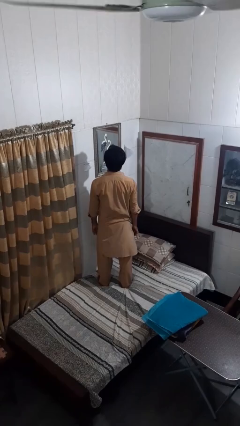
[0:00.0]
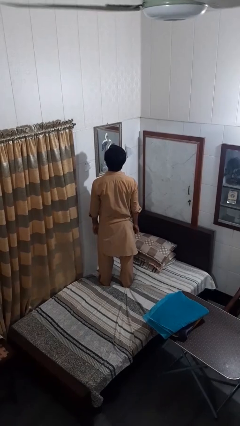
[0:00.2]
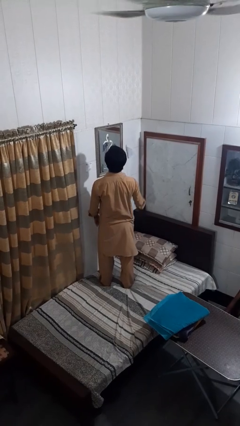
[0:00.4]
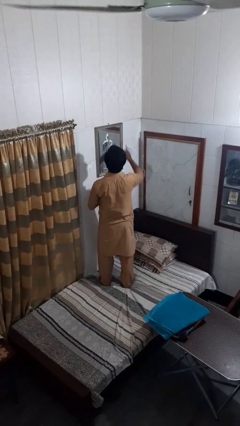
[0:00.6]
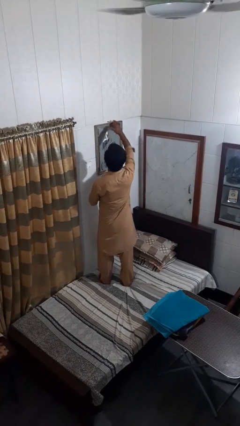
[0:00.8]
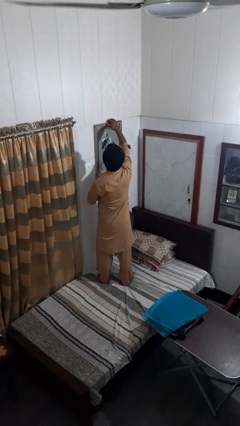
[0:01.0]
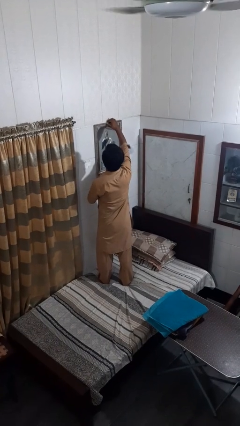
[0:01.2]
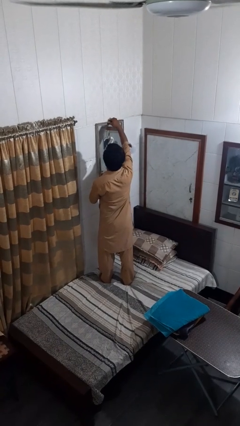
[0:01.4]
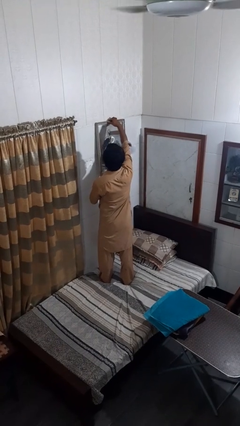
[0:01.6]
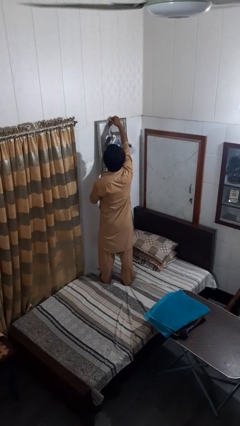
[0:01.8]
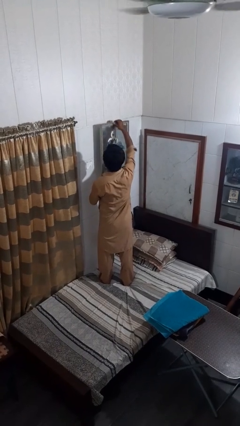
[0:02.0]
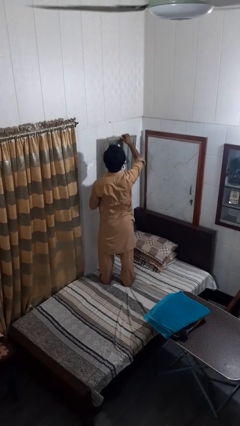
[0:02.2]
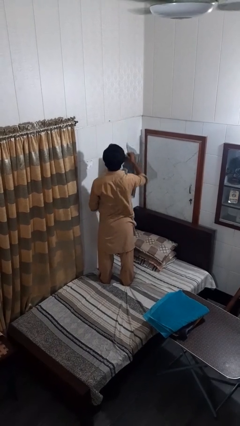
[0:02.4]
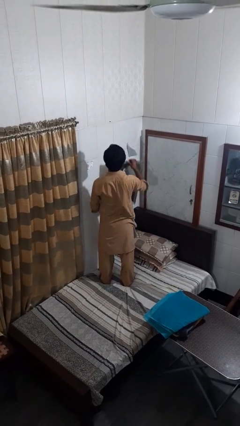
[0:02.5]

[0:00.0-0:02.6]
person takes down picture frame

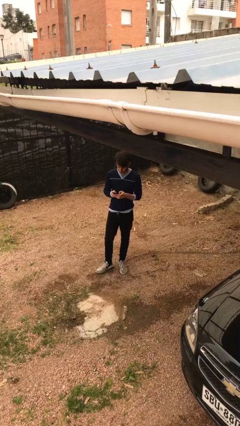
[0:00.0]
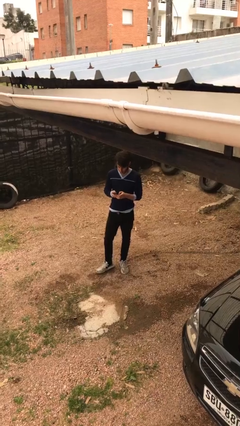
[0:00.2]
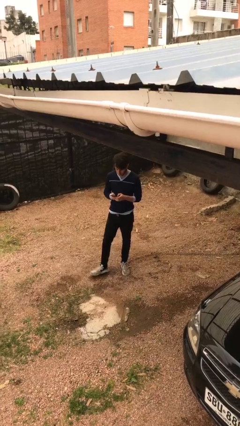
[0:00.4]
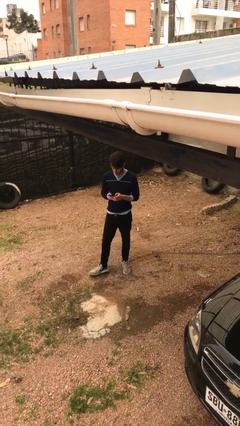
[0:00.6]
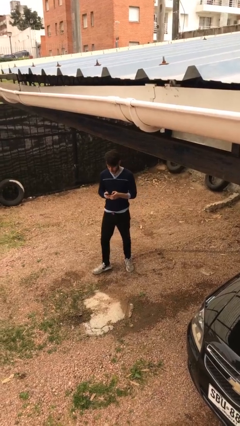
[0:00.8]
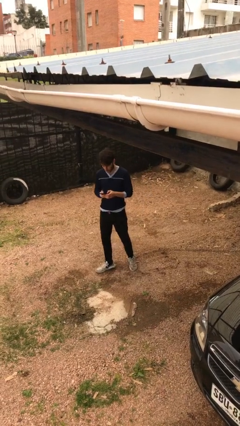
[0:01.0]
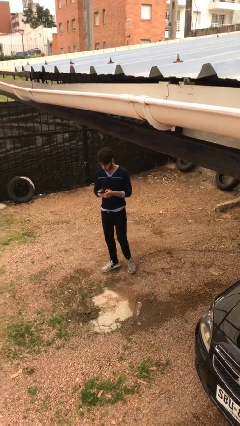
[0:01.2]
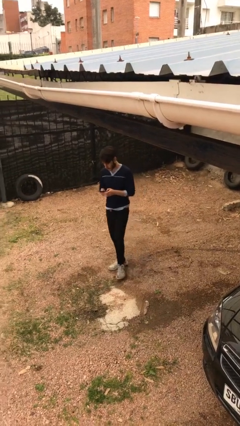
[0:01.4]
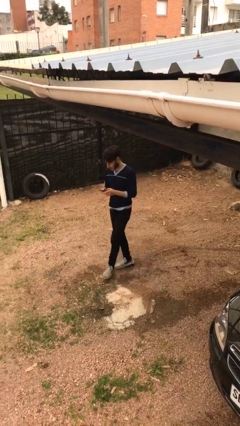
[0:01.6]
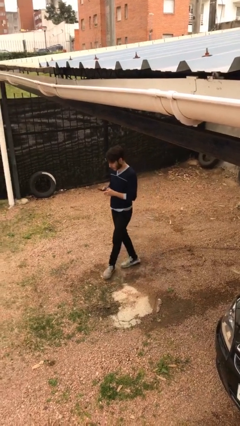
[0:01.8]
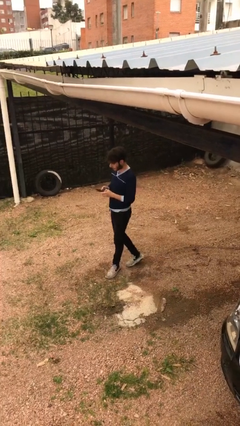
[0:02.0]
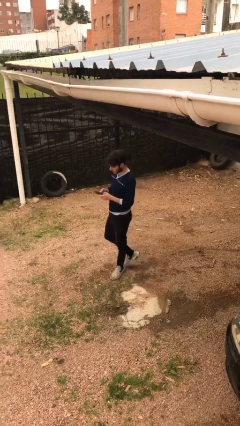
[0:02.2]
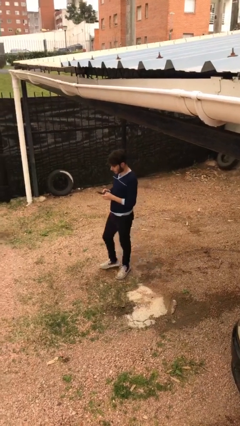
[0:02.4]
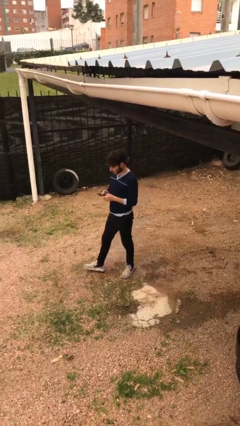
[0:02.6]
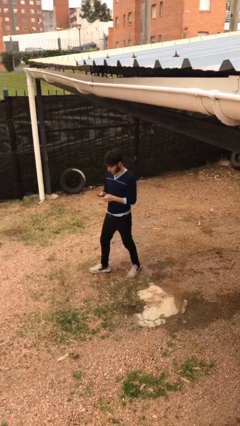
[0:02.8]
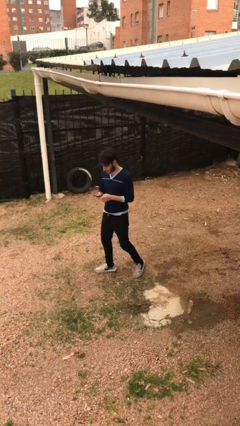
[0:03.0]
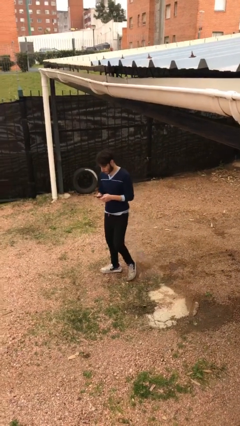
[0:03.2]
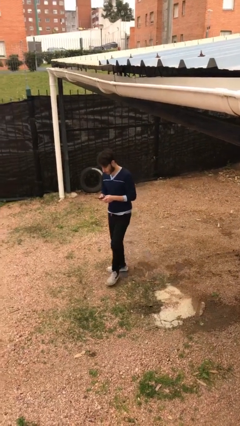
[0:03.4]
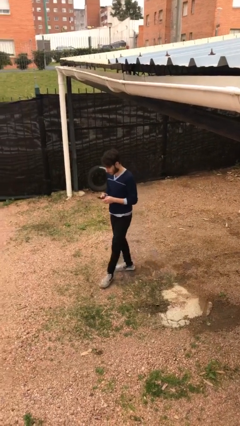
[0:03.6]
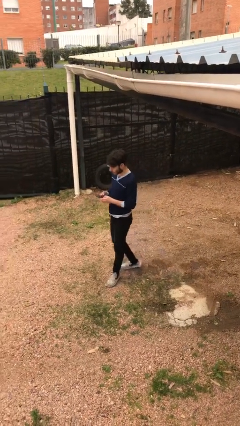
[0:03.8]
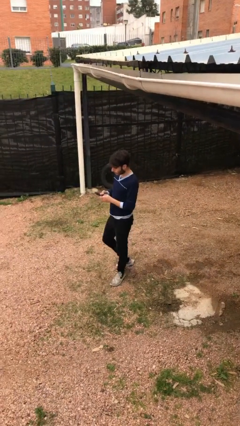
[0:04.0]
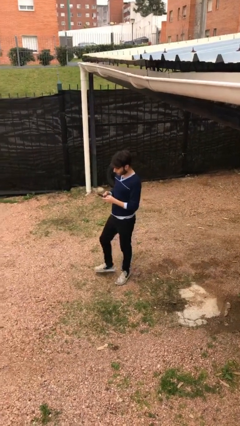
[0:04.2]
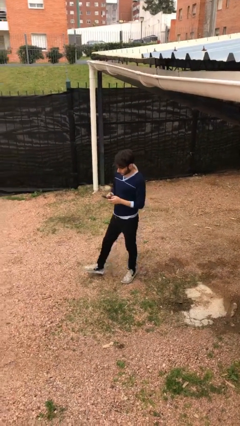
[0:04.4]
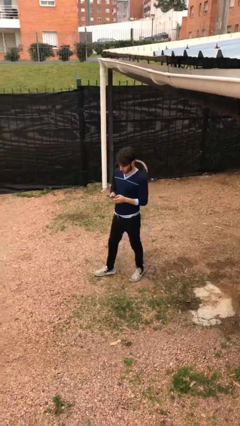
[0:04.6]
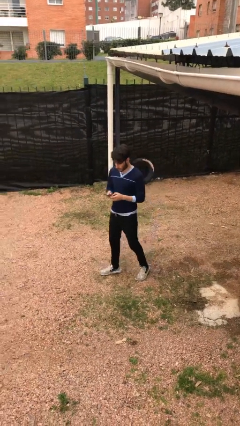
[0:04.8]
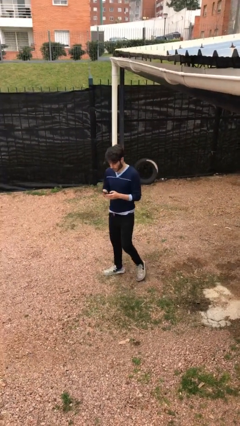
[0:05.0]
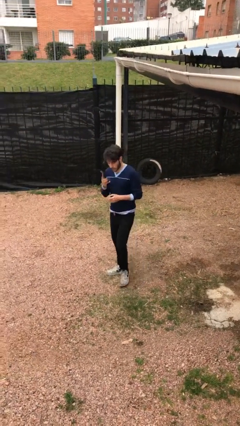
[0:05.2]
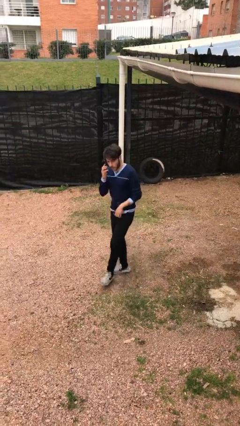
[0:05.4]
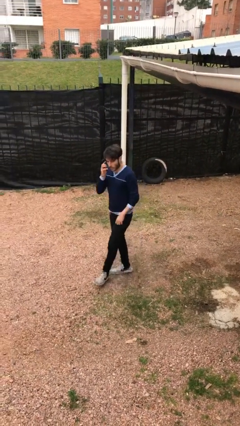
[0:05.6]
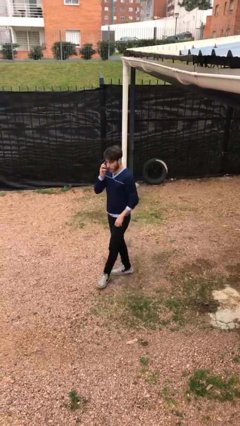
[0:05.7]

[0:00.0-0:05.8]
person texts on phone

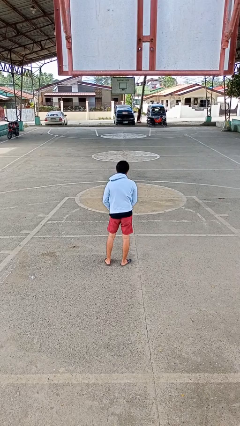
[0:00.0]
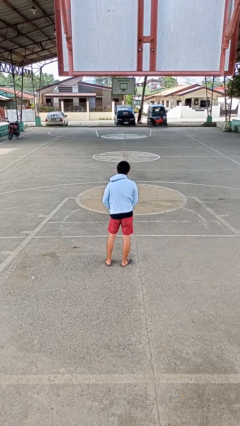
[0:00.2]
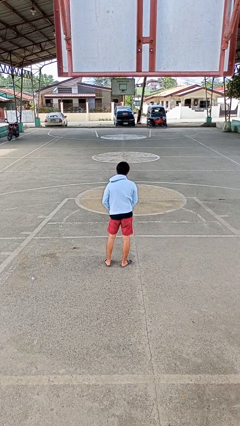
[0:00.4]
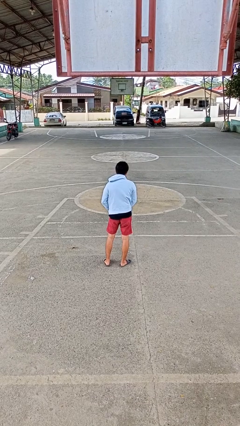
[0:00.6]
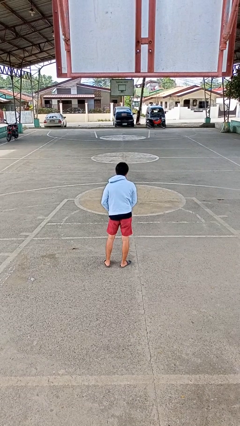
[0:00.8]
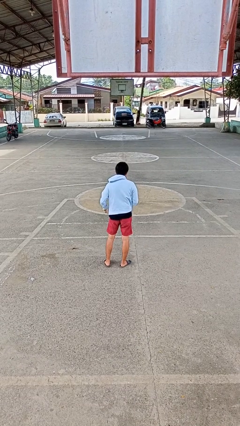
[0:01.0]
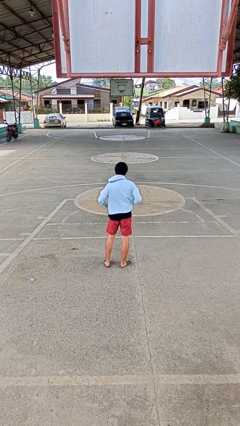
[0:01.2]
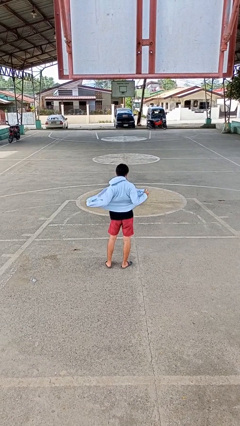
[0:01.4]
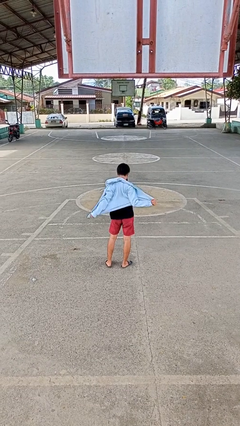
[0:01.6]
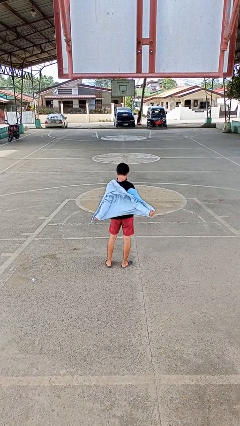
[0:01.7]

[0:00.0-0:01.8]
person unzips jacket

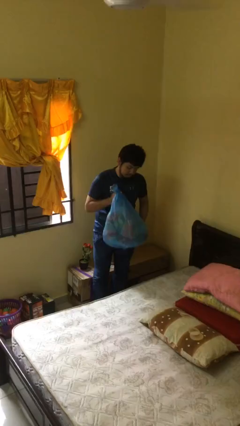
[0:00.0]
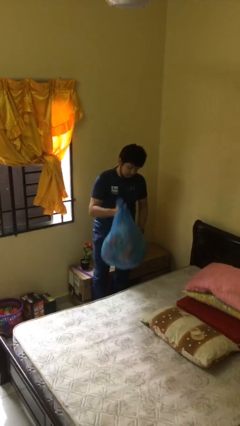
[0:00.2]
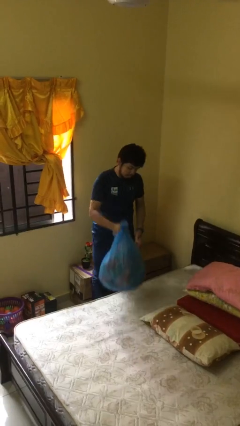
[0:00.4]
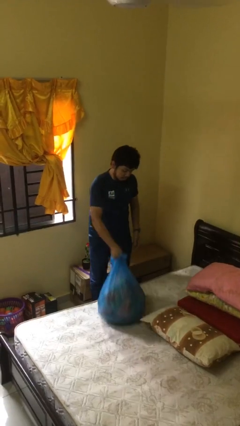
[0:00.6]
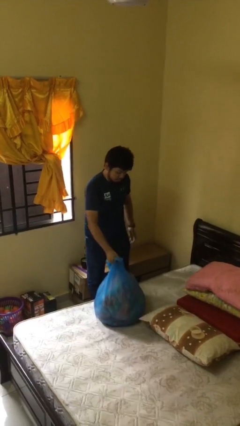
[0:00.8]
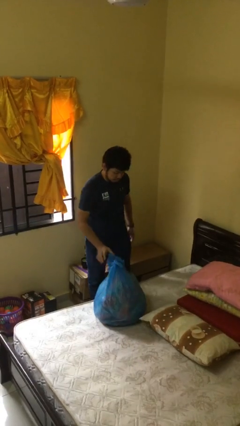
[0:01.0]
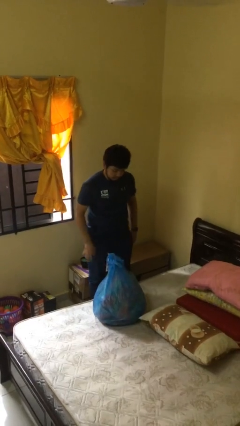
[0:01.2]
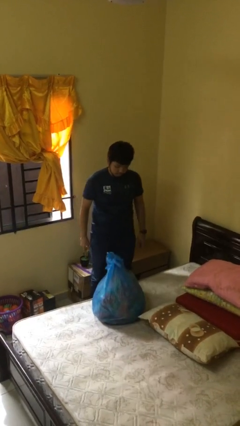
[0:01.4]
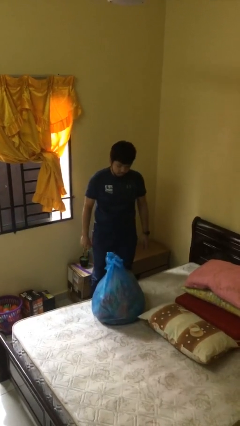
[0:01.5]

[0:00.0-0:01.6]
person puts down object on bed

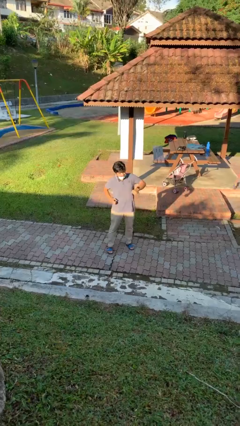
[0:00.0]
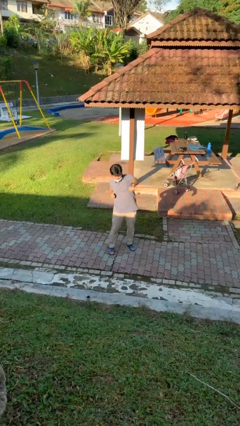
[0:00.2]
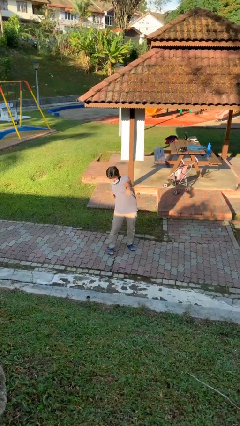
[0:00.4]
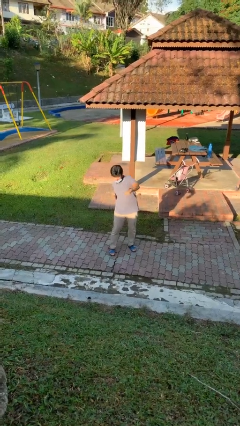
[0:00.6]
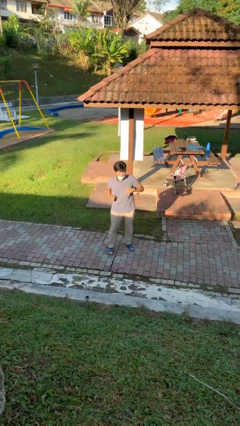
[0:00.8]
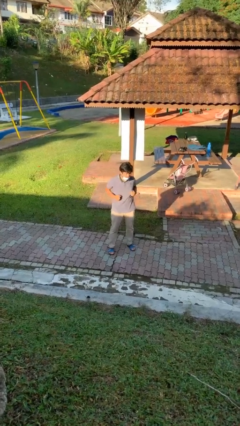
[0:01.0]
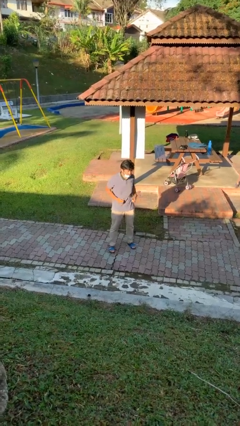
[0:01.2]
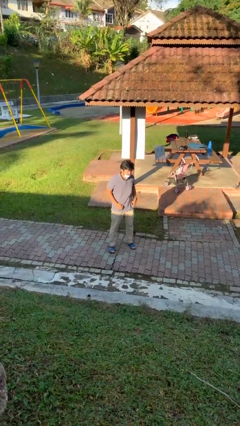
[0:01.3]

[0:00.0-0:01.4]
person punches

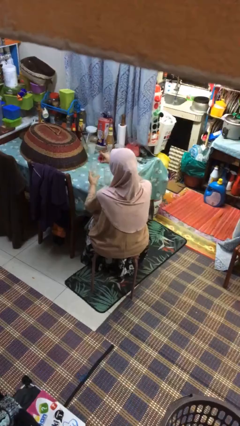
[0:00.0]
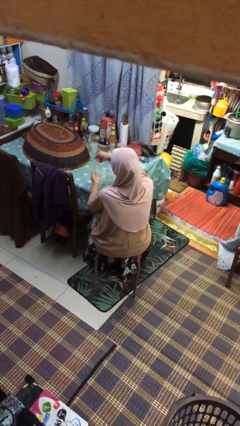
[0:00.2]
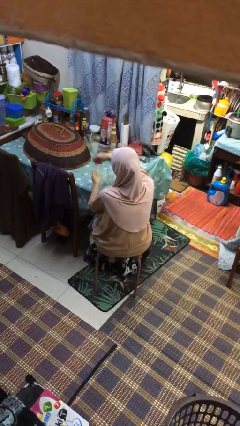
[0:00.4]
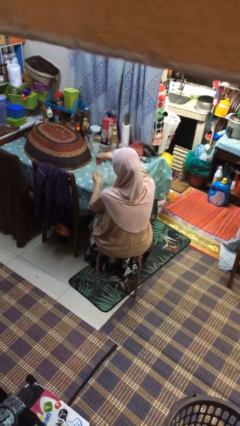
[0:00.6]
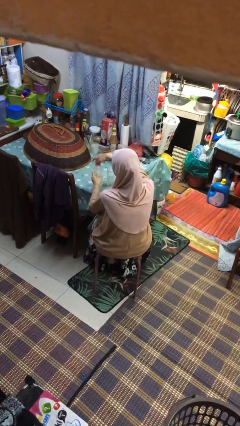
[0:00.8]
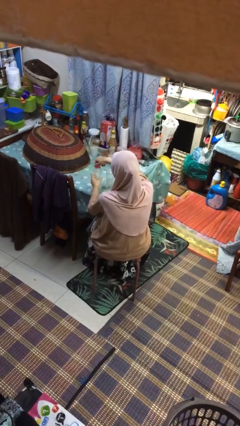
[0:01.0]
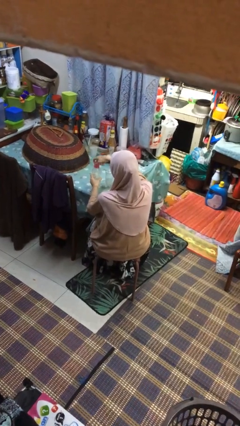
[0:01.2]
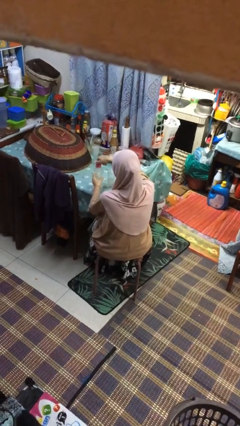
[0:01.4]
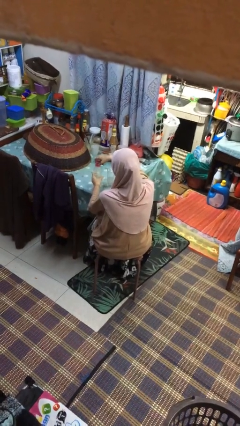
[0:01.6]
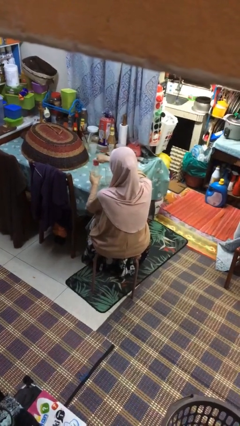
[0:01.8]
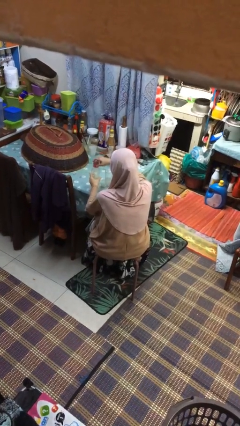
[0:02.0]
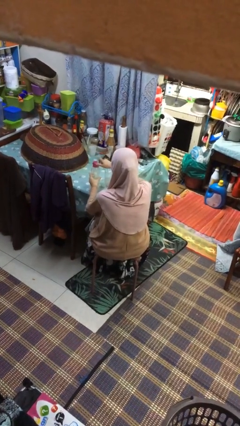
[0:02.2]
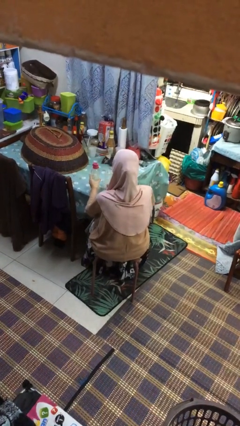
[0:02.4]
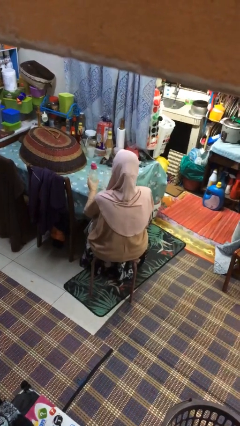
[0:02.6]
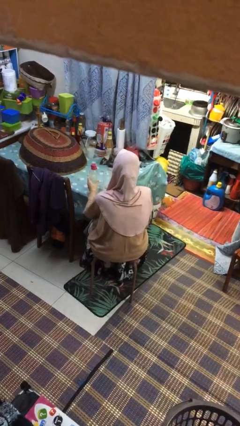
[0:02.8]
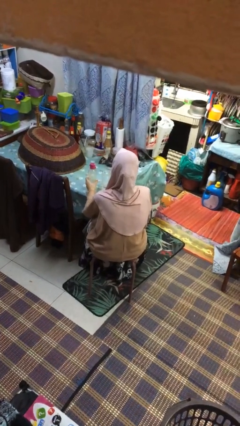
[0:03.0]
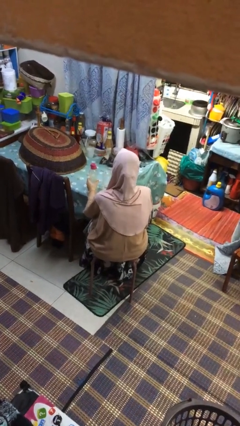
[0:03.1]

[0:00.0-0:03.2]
person screws lid to bottle

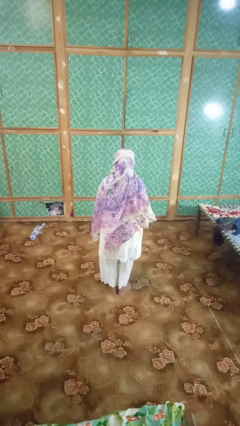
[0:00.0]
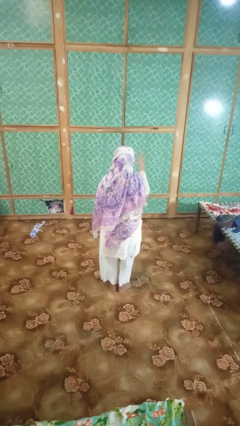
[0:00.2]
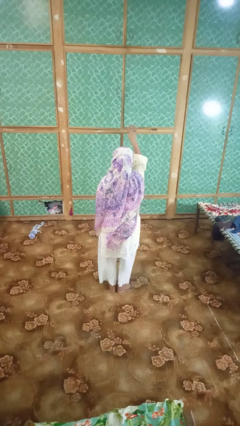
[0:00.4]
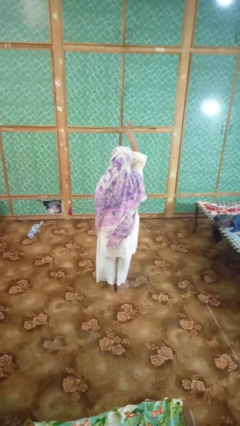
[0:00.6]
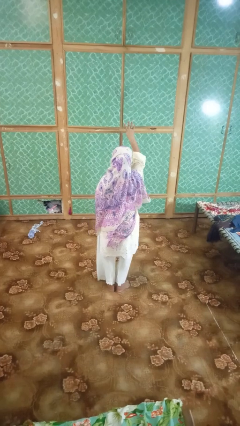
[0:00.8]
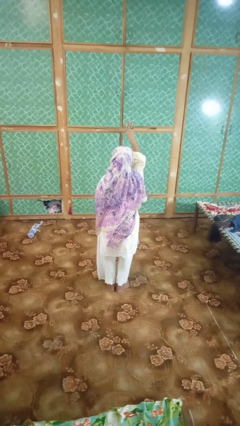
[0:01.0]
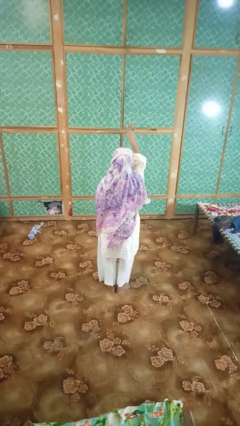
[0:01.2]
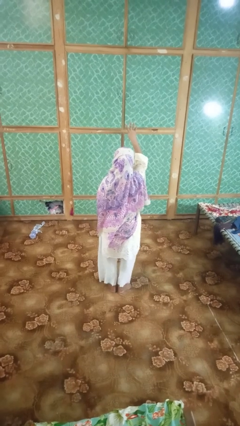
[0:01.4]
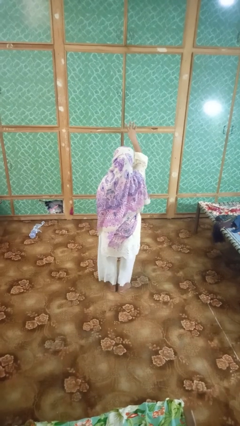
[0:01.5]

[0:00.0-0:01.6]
person gestures number four
